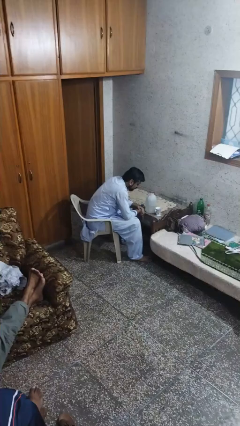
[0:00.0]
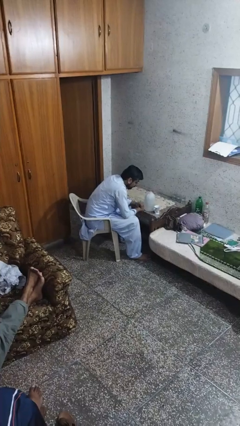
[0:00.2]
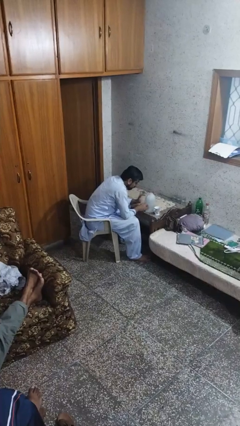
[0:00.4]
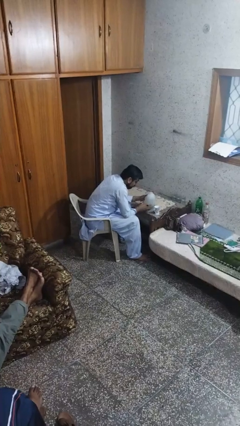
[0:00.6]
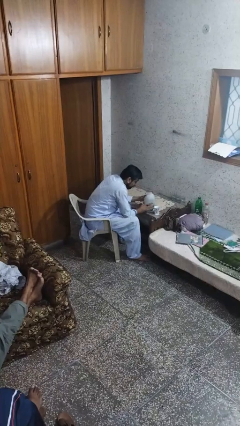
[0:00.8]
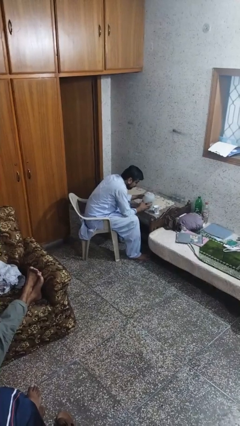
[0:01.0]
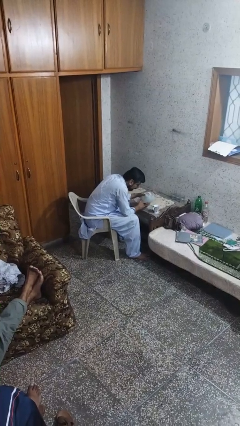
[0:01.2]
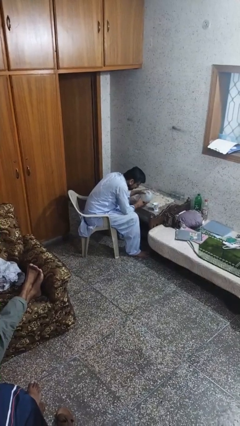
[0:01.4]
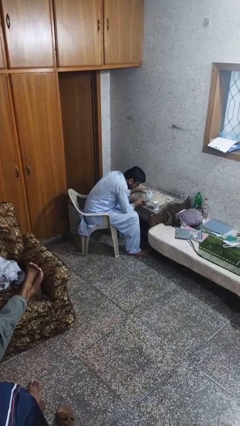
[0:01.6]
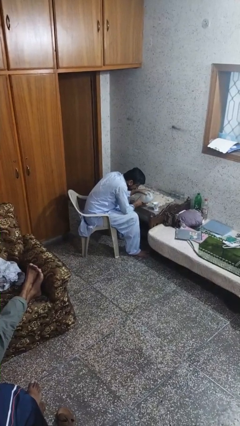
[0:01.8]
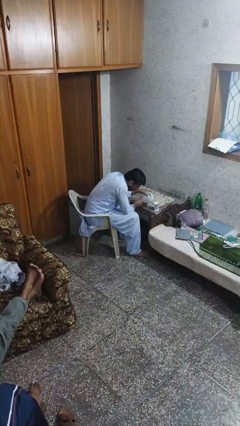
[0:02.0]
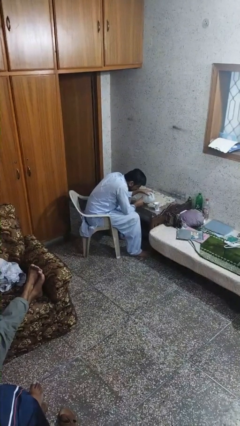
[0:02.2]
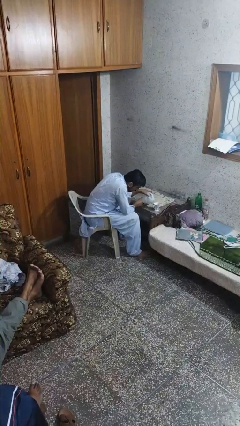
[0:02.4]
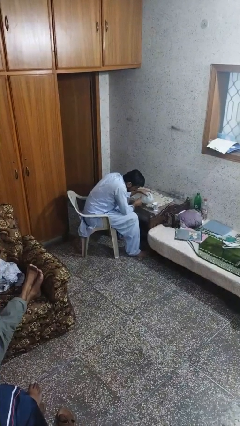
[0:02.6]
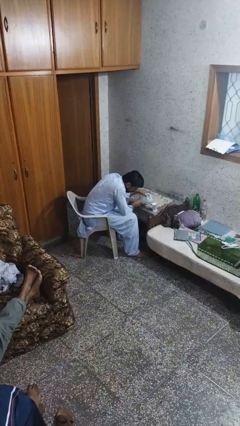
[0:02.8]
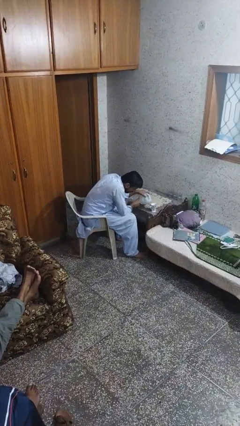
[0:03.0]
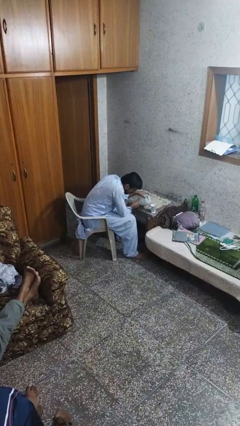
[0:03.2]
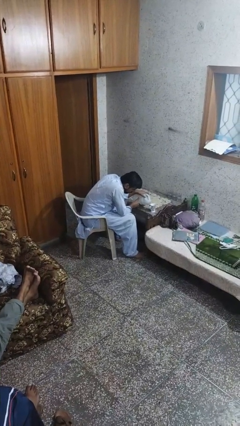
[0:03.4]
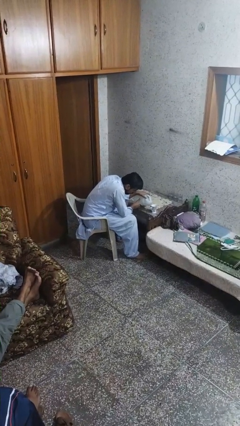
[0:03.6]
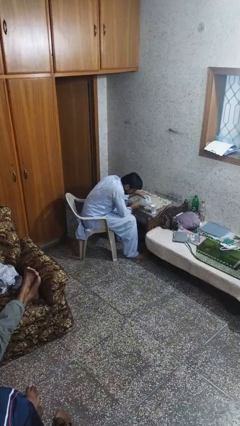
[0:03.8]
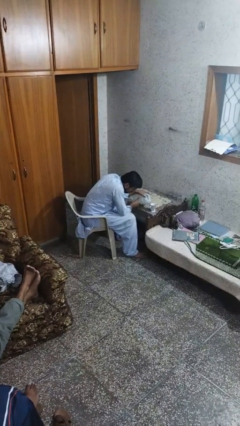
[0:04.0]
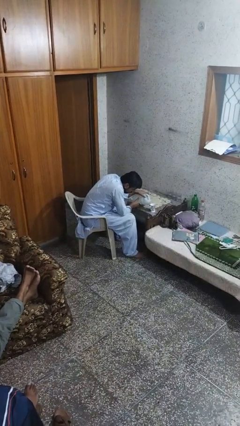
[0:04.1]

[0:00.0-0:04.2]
person pours liquid into cup

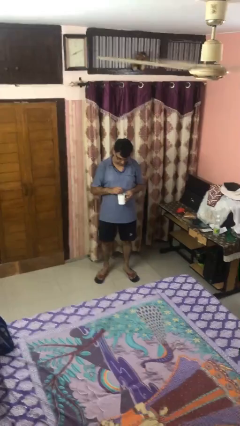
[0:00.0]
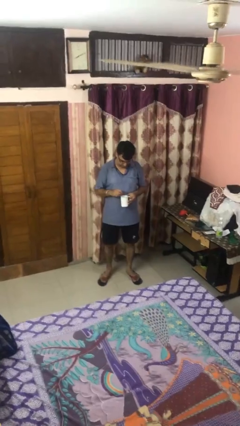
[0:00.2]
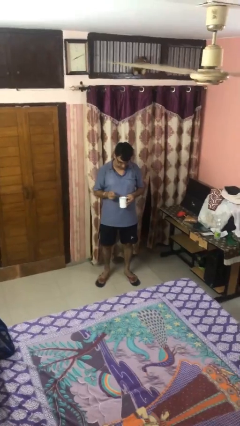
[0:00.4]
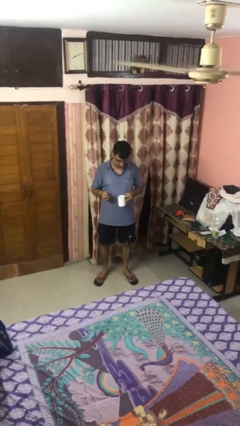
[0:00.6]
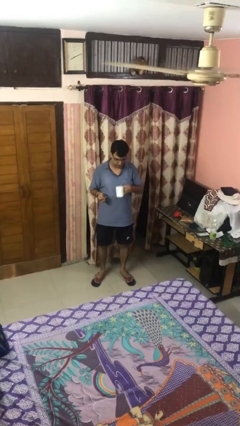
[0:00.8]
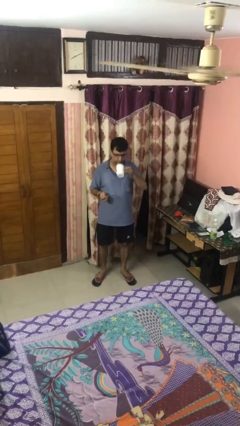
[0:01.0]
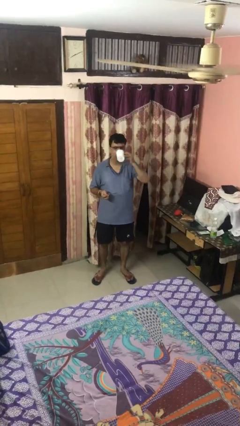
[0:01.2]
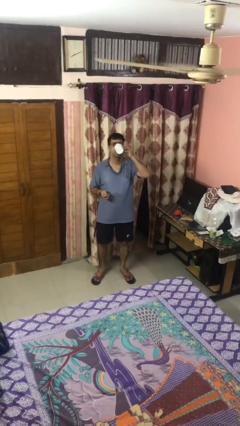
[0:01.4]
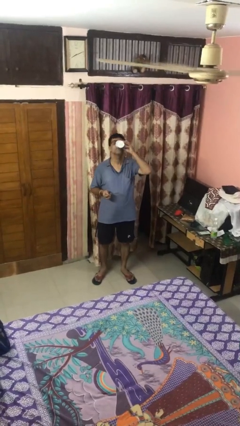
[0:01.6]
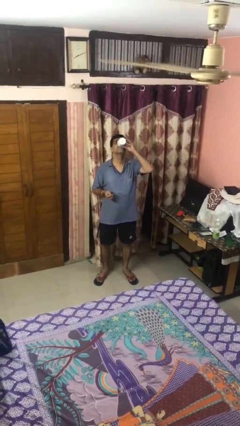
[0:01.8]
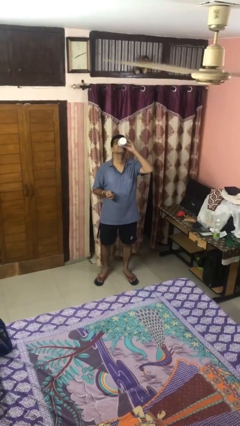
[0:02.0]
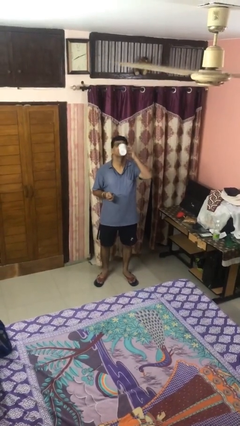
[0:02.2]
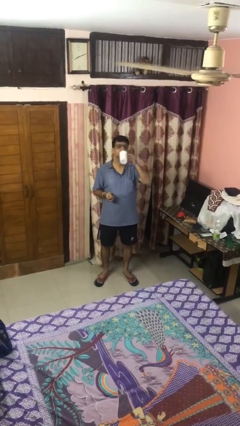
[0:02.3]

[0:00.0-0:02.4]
person drinks from mug

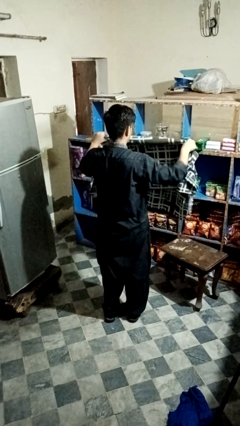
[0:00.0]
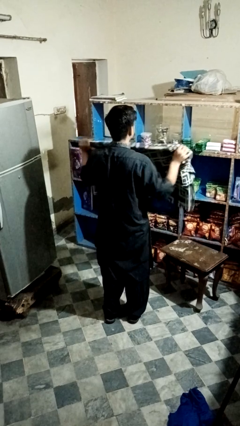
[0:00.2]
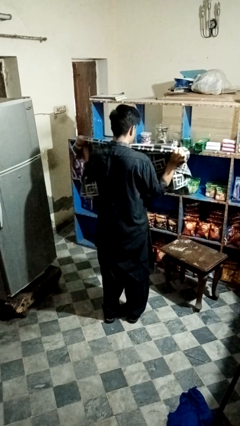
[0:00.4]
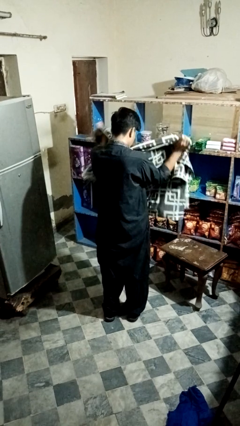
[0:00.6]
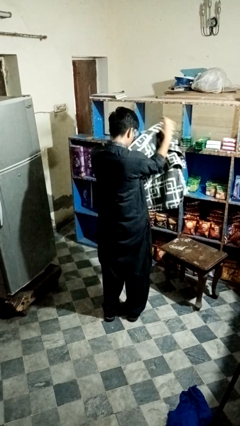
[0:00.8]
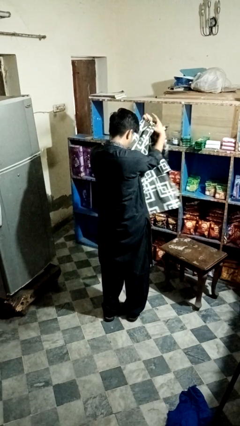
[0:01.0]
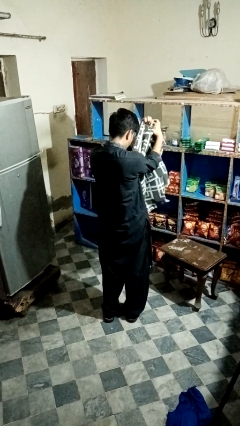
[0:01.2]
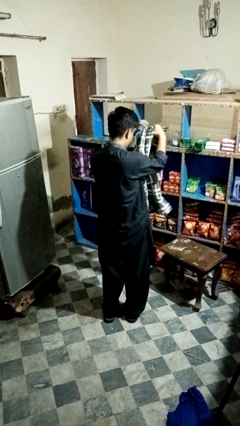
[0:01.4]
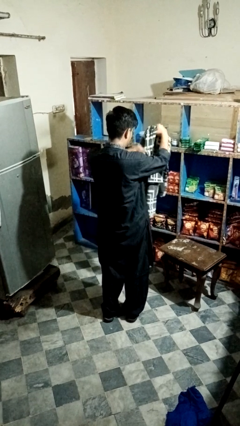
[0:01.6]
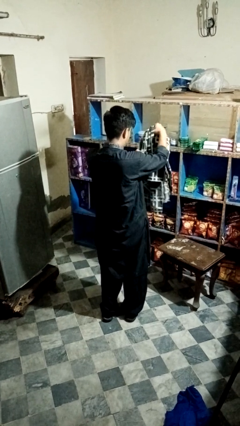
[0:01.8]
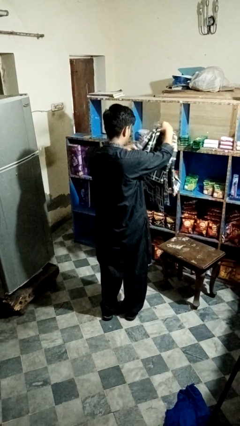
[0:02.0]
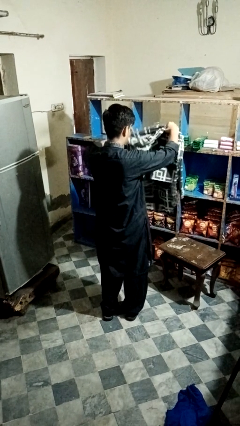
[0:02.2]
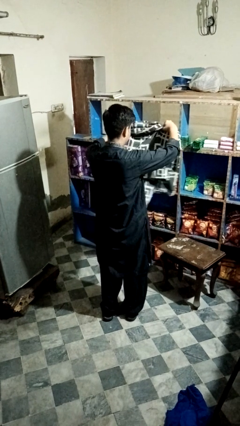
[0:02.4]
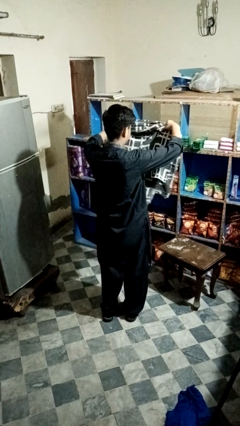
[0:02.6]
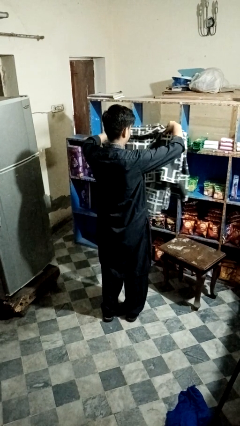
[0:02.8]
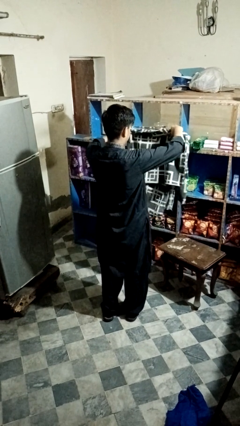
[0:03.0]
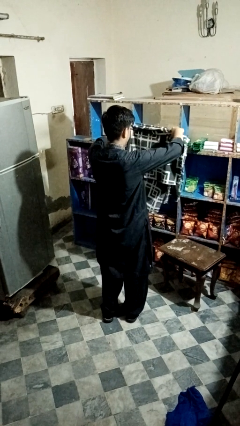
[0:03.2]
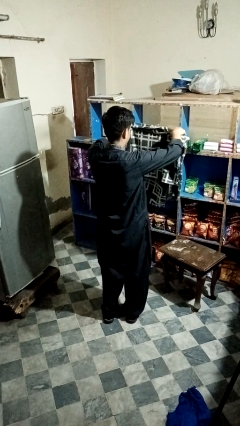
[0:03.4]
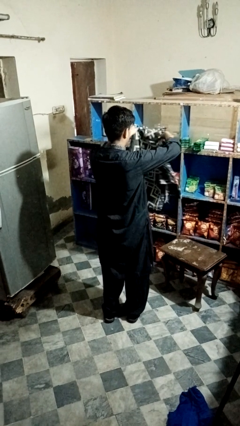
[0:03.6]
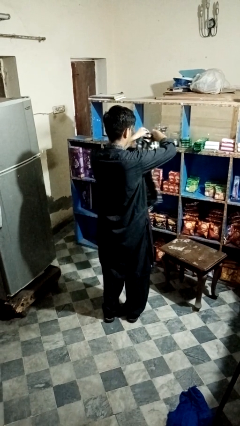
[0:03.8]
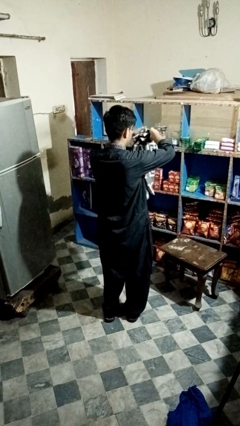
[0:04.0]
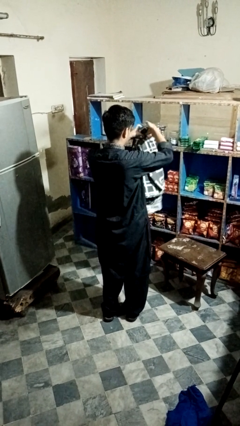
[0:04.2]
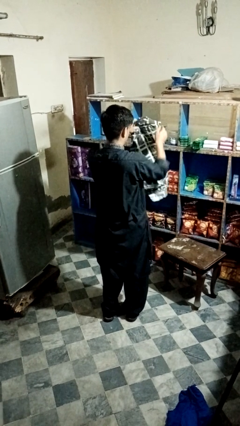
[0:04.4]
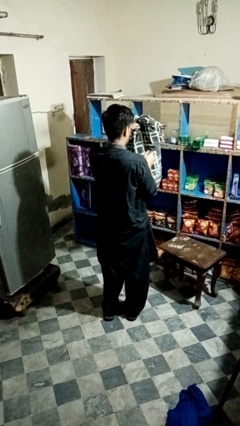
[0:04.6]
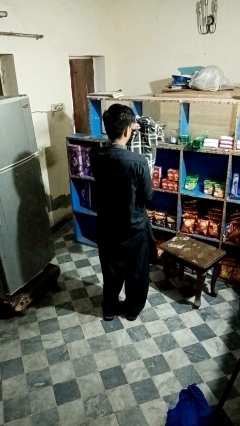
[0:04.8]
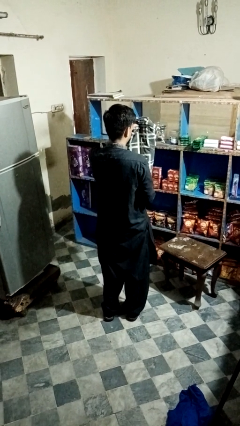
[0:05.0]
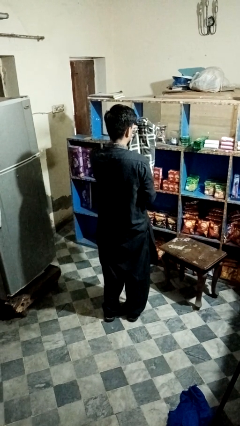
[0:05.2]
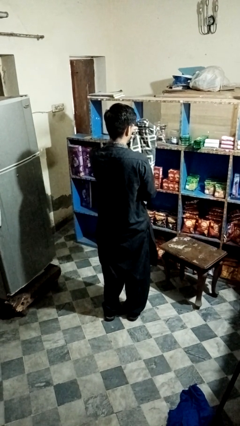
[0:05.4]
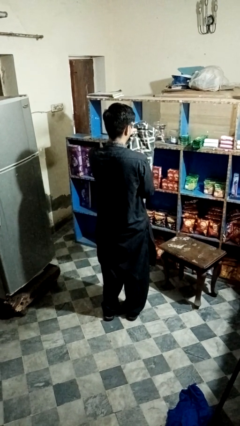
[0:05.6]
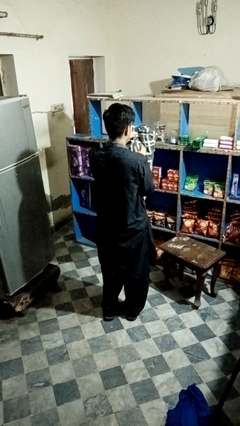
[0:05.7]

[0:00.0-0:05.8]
person folds blanket

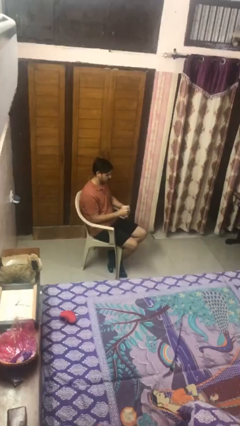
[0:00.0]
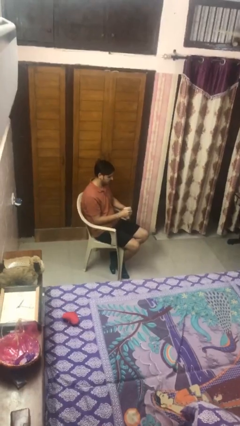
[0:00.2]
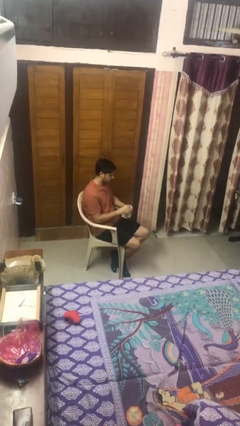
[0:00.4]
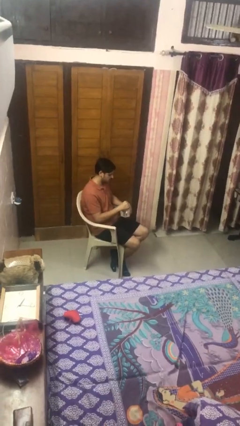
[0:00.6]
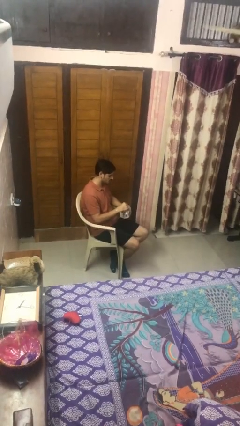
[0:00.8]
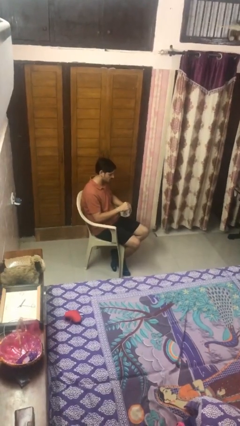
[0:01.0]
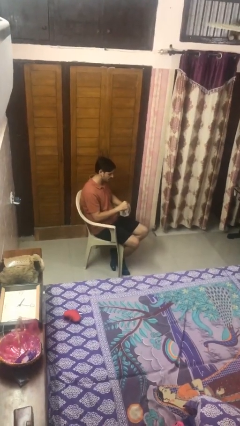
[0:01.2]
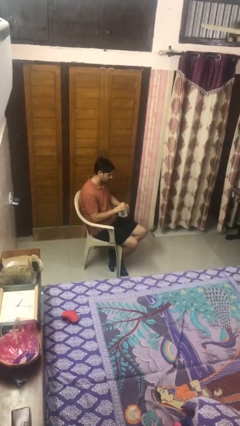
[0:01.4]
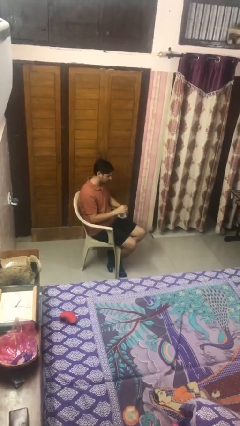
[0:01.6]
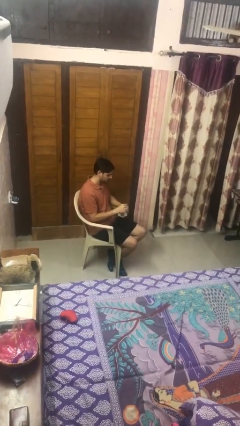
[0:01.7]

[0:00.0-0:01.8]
person stirs mug

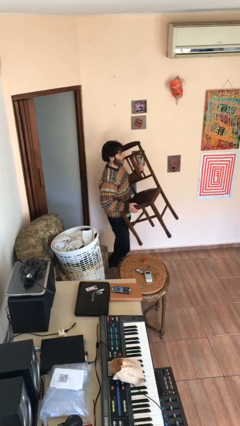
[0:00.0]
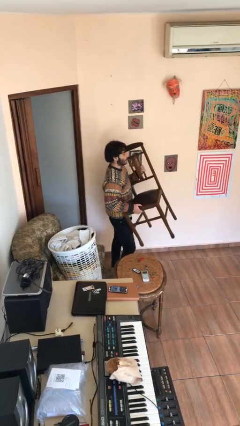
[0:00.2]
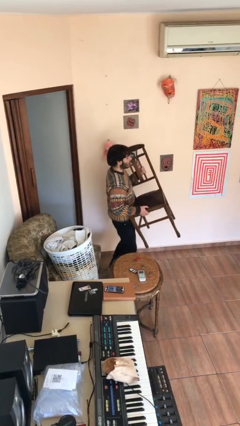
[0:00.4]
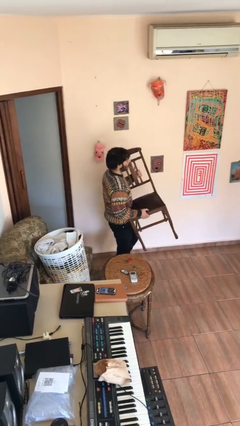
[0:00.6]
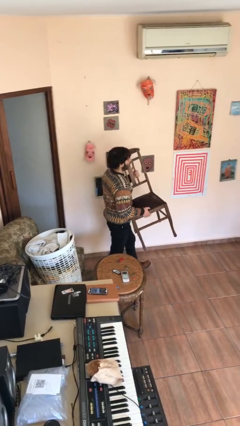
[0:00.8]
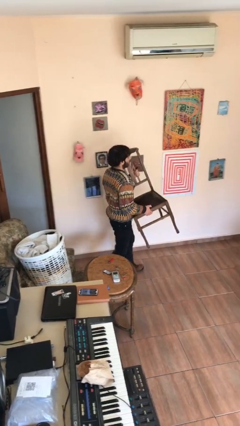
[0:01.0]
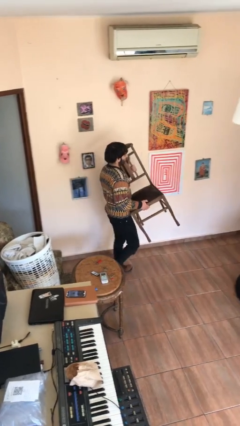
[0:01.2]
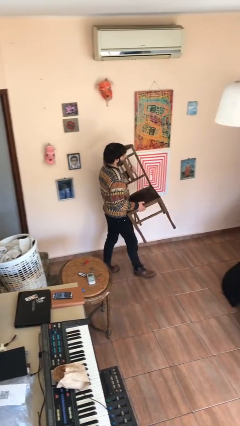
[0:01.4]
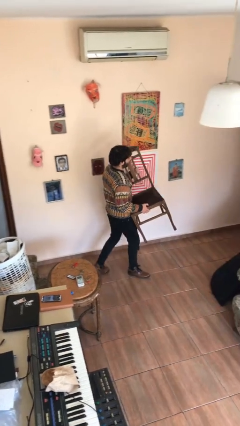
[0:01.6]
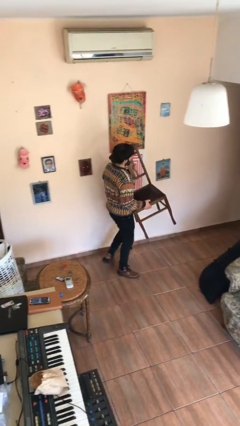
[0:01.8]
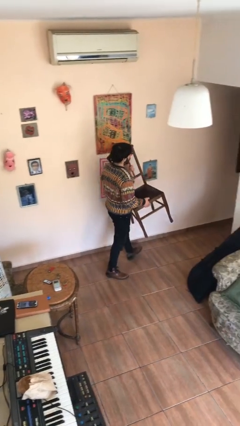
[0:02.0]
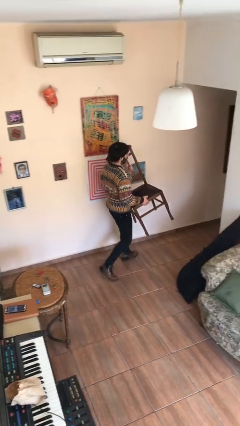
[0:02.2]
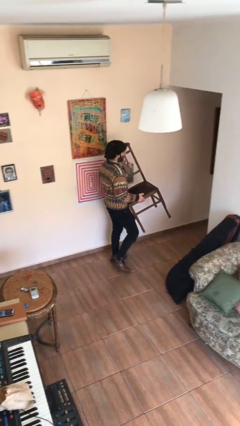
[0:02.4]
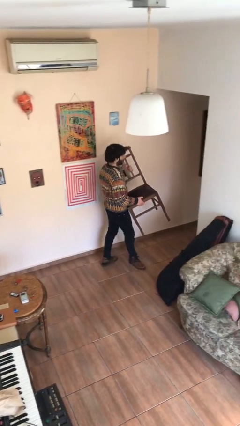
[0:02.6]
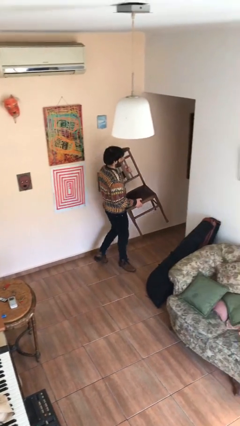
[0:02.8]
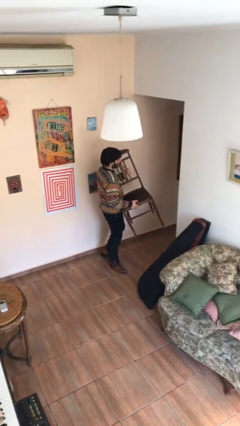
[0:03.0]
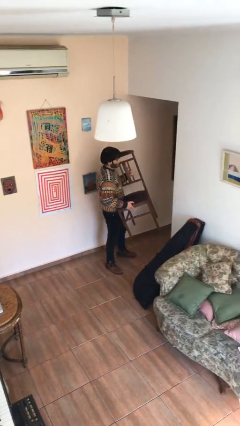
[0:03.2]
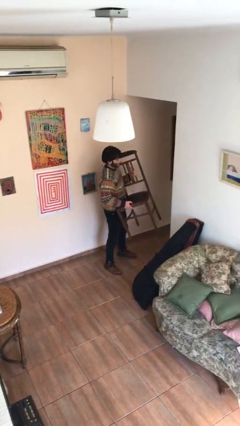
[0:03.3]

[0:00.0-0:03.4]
person carries furniture
